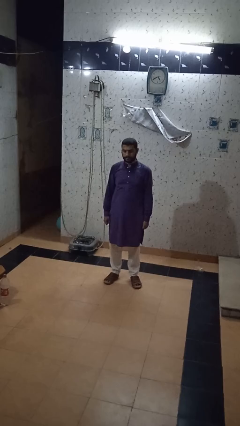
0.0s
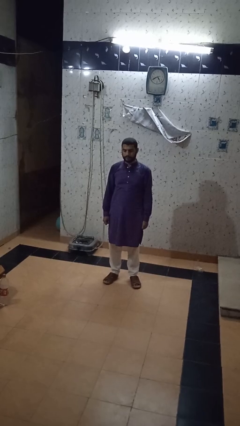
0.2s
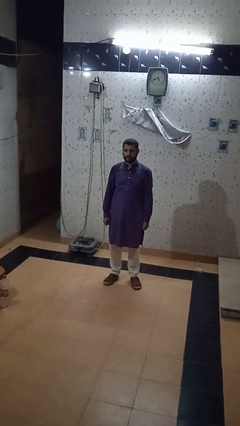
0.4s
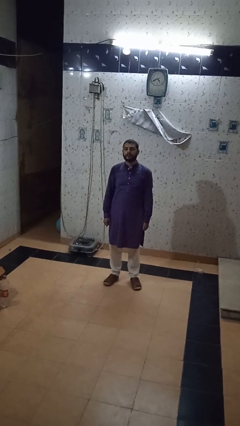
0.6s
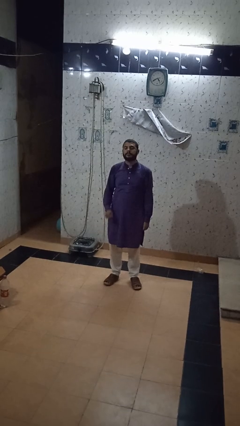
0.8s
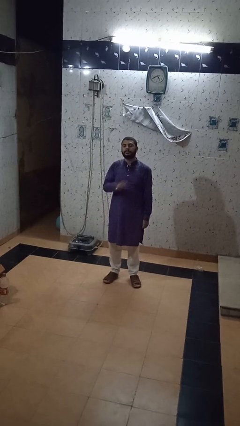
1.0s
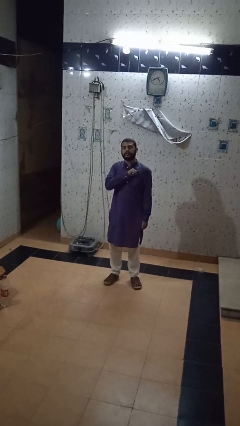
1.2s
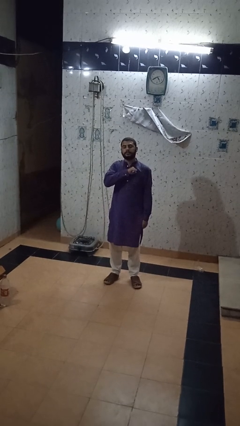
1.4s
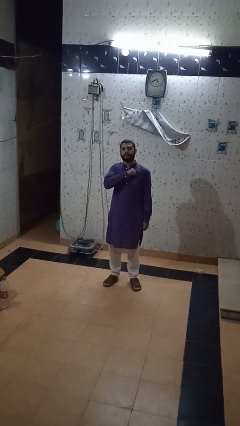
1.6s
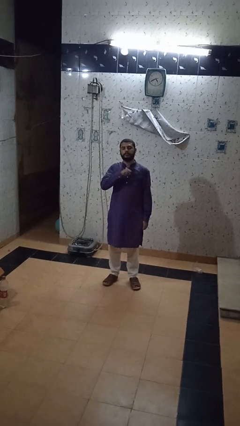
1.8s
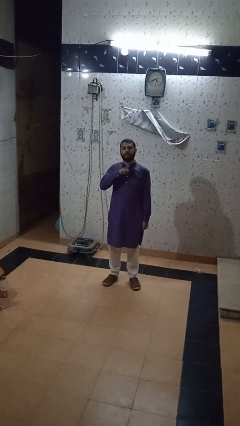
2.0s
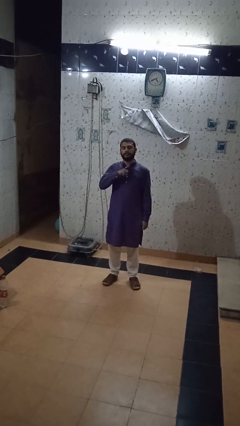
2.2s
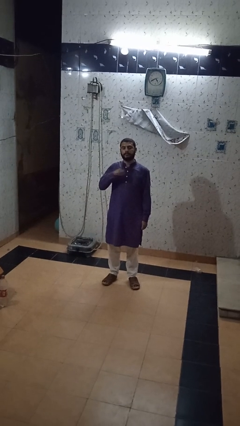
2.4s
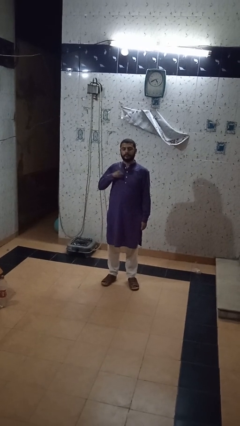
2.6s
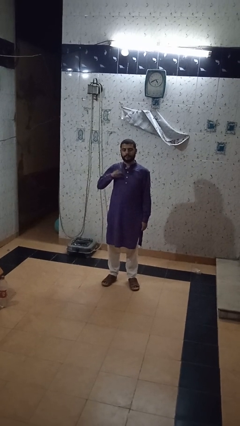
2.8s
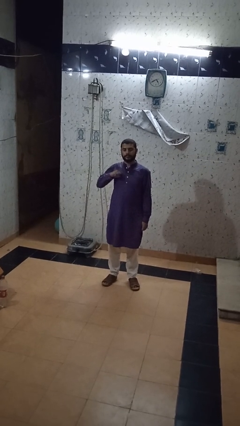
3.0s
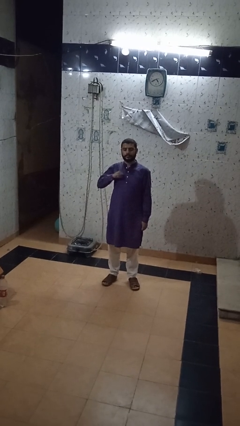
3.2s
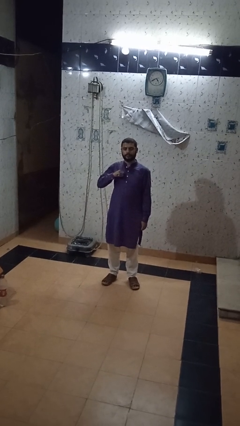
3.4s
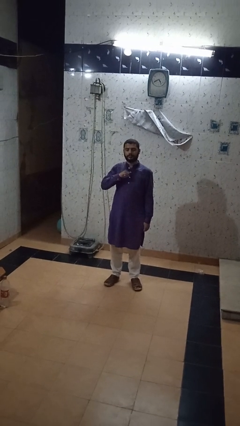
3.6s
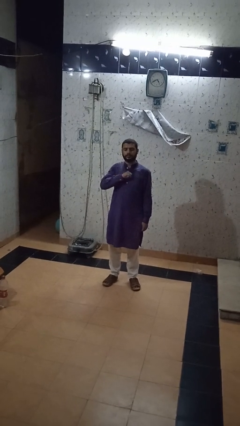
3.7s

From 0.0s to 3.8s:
person drums on chest

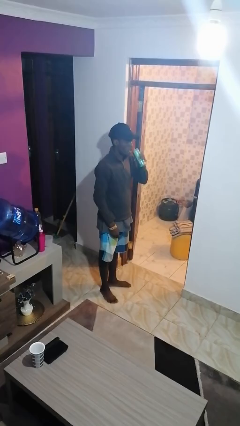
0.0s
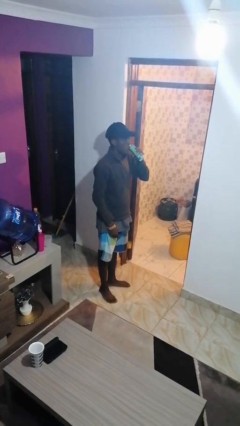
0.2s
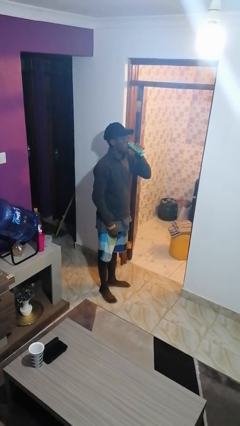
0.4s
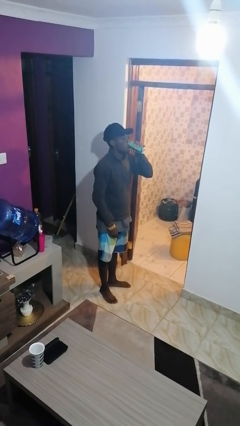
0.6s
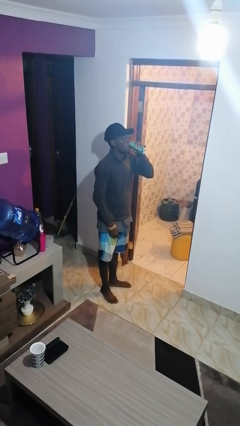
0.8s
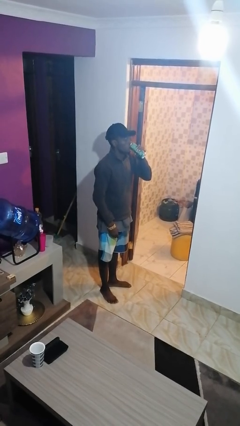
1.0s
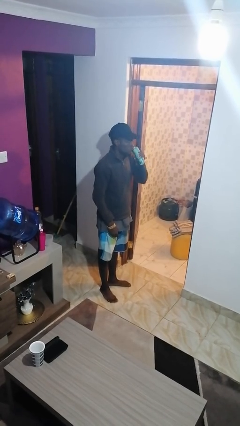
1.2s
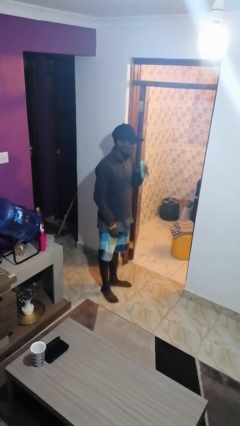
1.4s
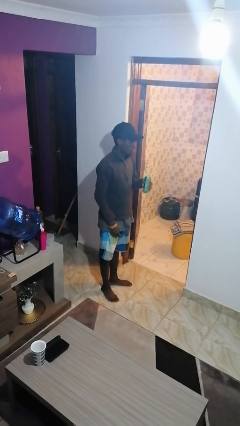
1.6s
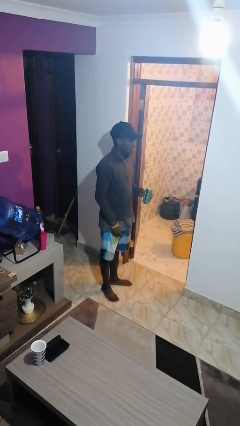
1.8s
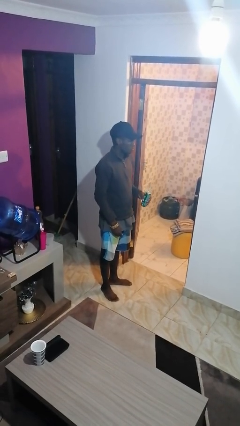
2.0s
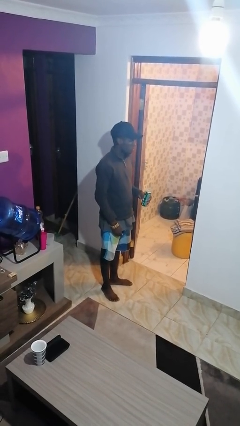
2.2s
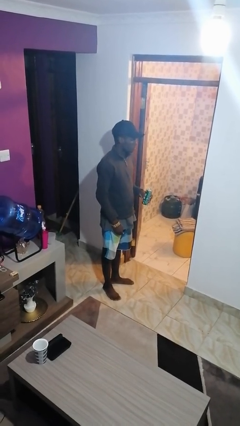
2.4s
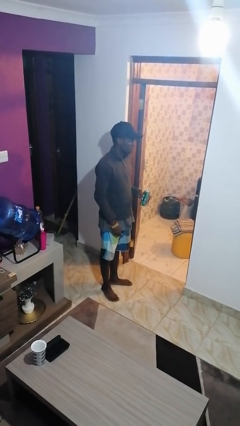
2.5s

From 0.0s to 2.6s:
person drinks from beverage can

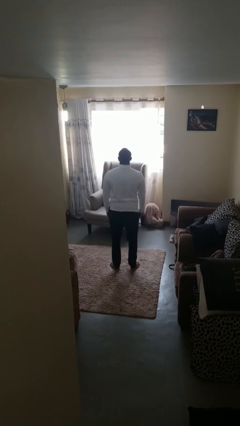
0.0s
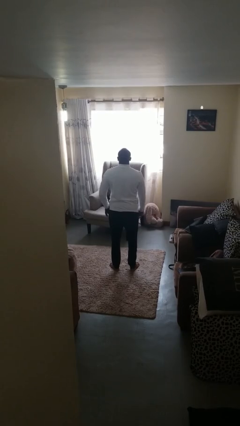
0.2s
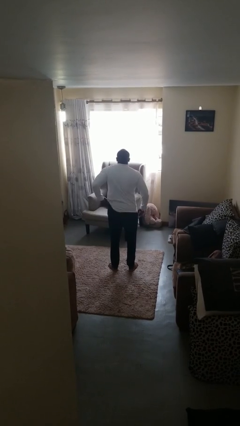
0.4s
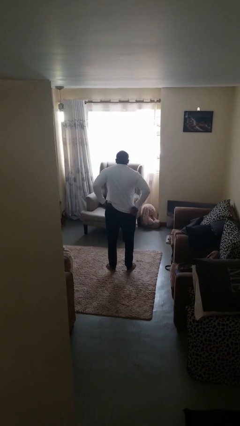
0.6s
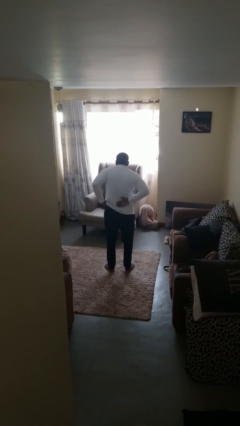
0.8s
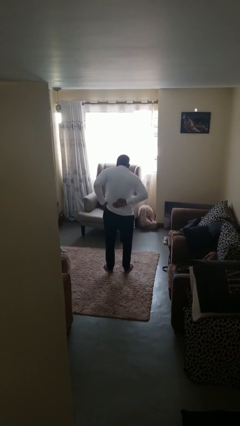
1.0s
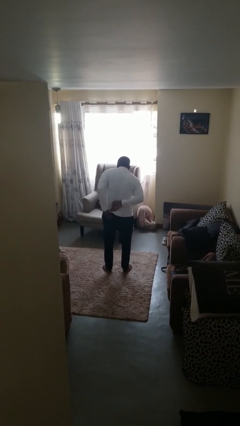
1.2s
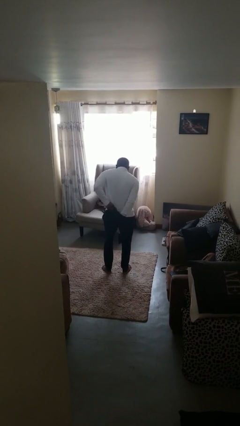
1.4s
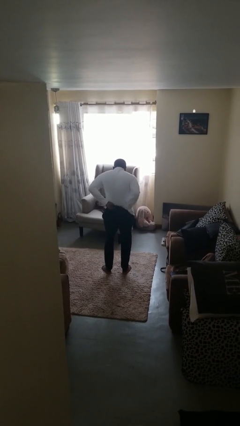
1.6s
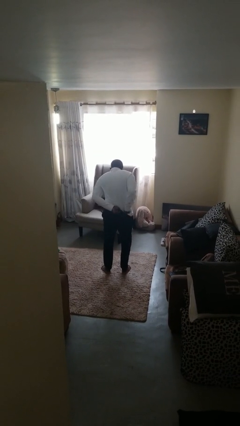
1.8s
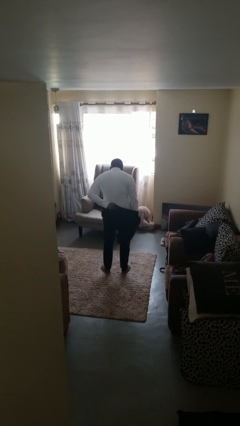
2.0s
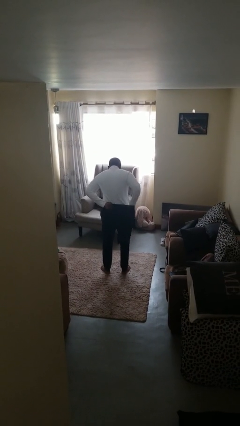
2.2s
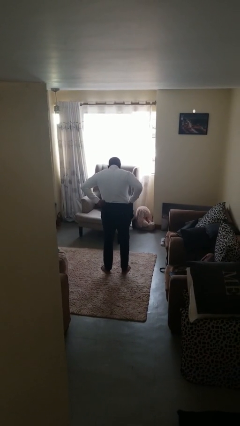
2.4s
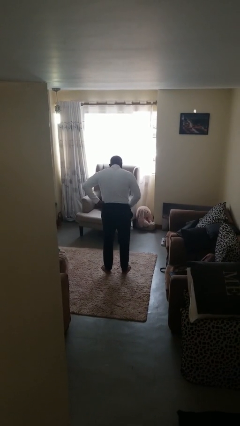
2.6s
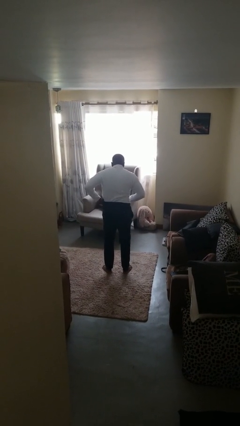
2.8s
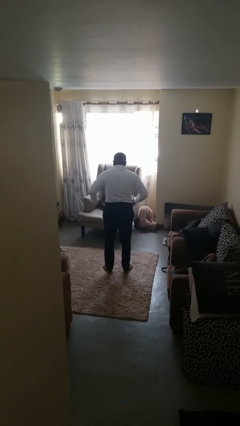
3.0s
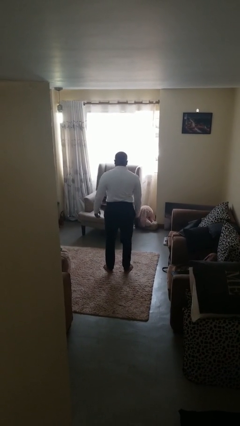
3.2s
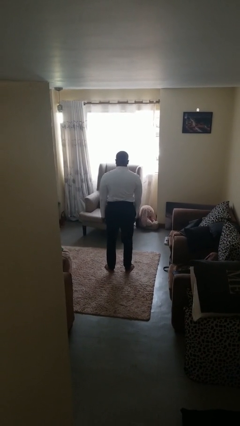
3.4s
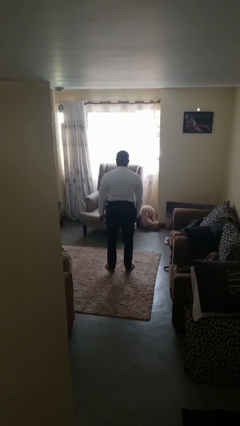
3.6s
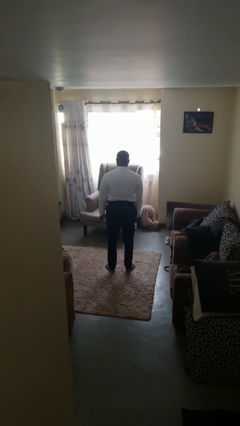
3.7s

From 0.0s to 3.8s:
person tucks in shirt

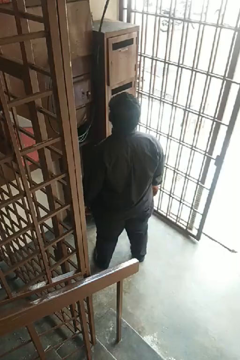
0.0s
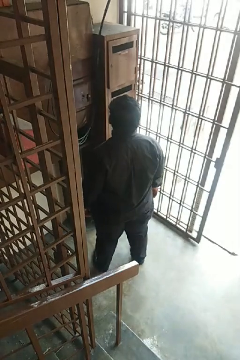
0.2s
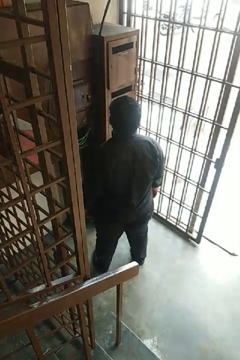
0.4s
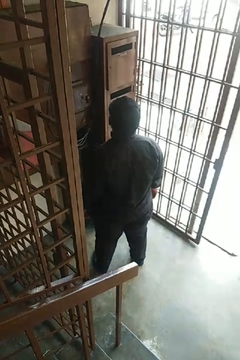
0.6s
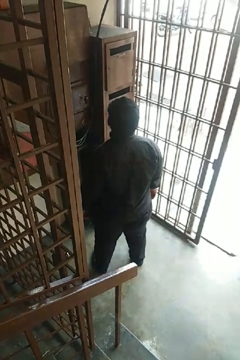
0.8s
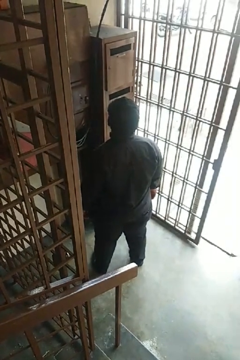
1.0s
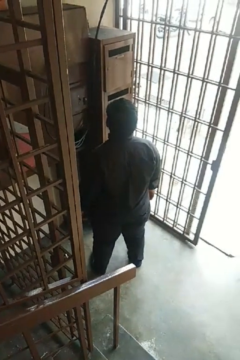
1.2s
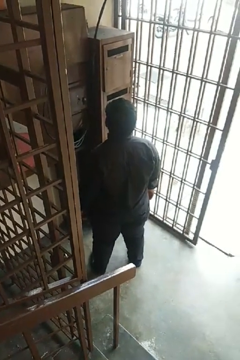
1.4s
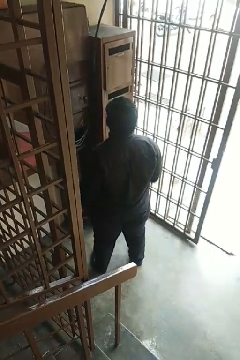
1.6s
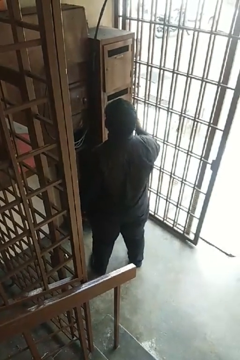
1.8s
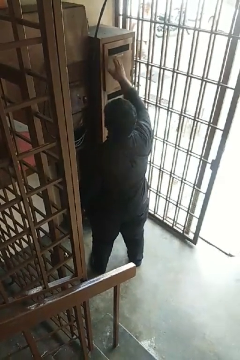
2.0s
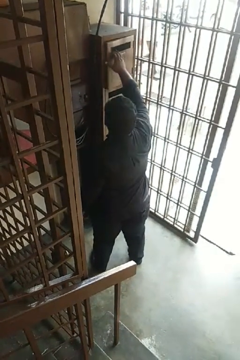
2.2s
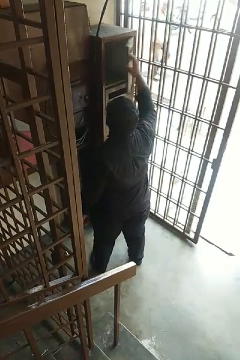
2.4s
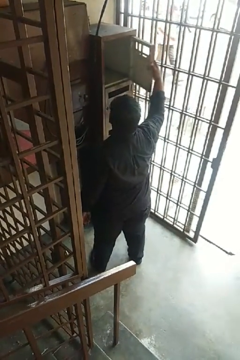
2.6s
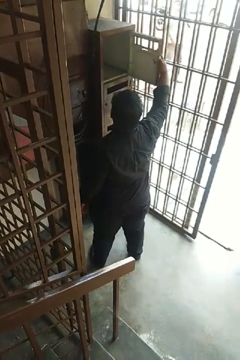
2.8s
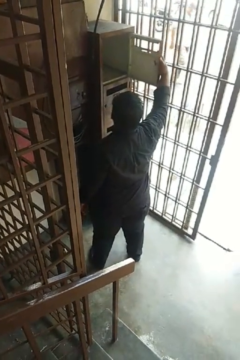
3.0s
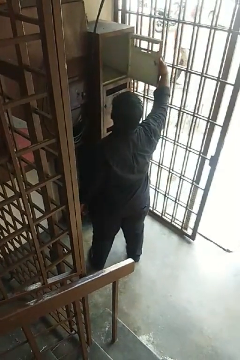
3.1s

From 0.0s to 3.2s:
person opens mailbox

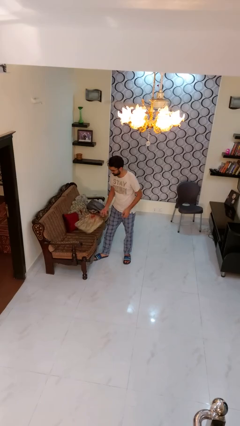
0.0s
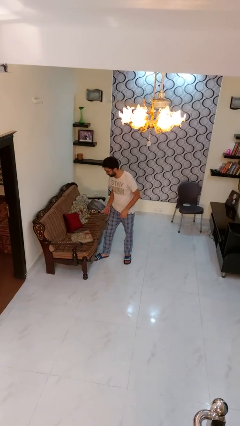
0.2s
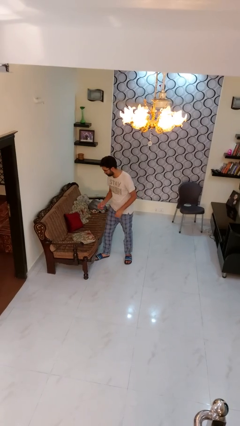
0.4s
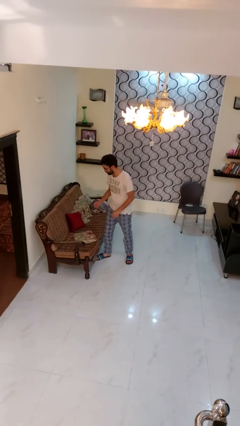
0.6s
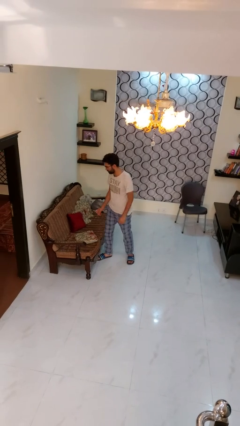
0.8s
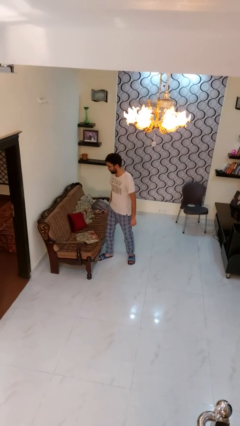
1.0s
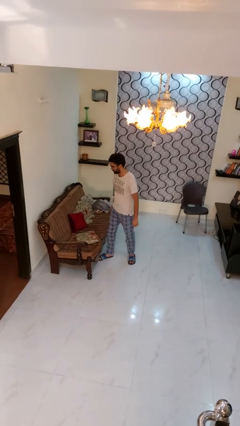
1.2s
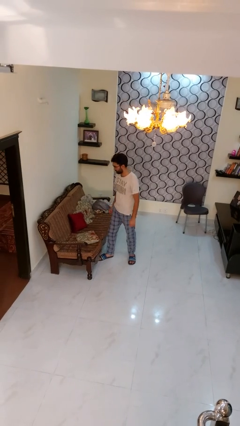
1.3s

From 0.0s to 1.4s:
person puts down object on couch

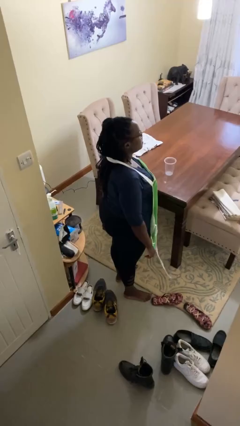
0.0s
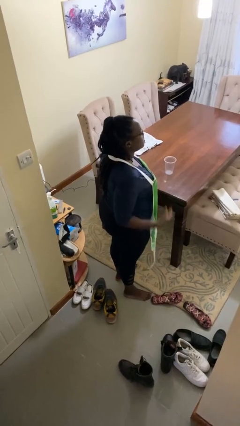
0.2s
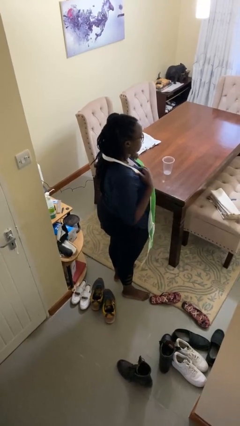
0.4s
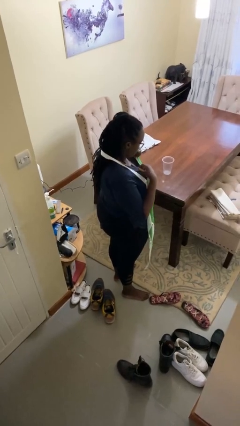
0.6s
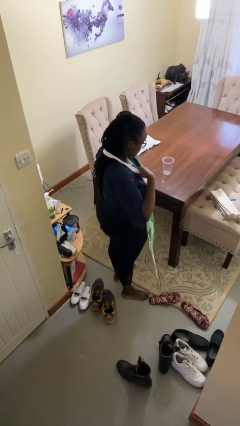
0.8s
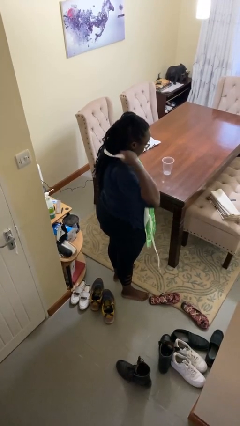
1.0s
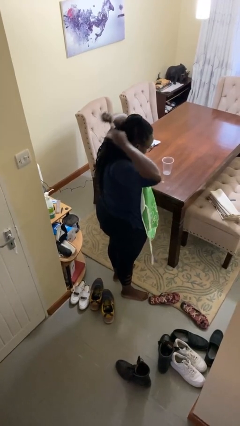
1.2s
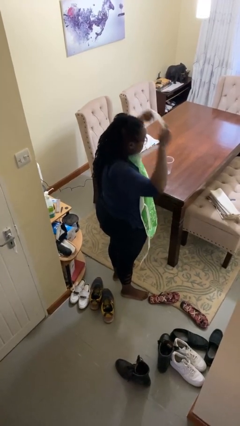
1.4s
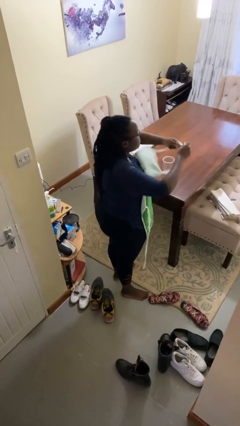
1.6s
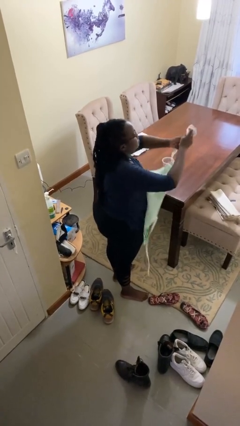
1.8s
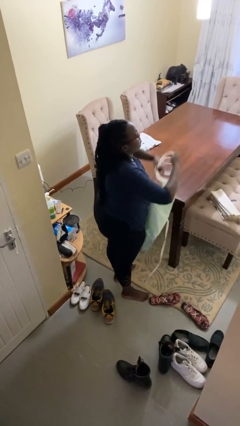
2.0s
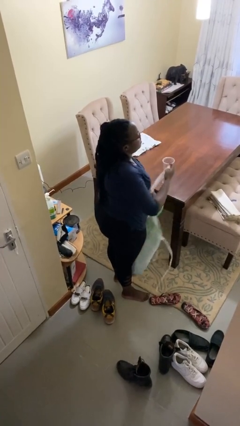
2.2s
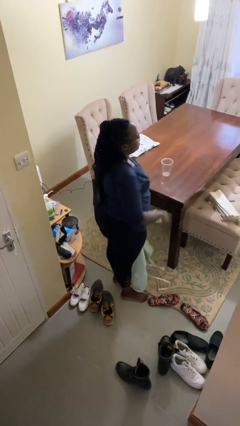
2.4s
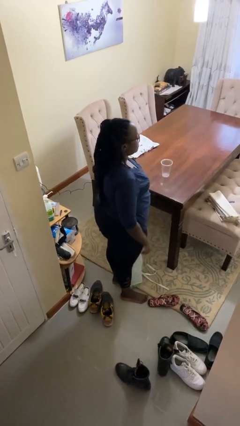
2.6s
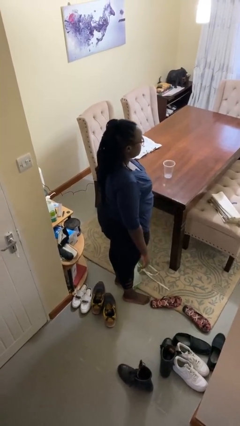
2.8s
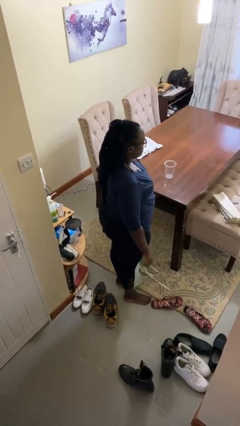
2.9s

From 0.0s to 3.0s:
person takes off apron
